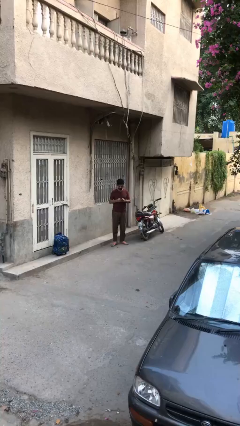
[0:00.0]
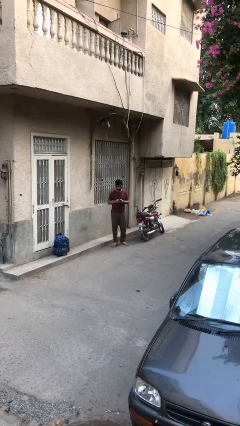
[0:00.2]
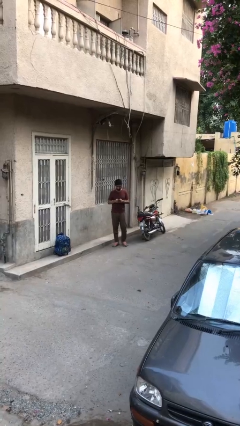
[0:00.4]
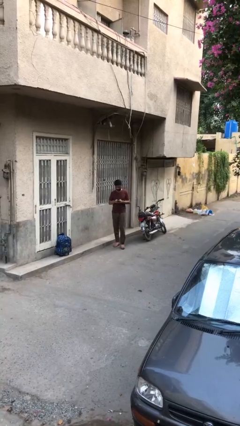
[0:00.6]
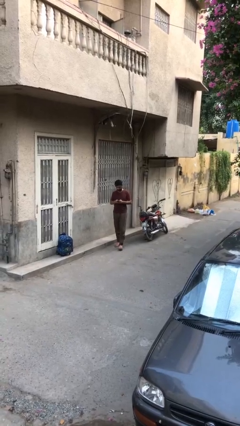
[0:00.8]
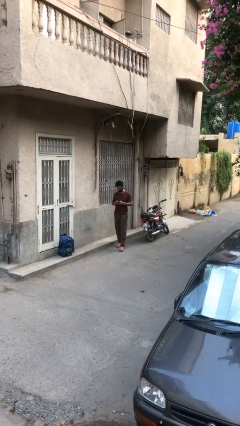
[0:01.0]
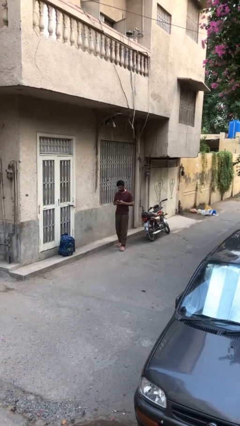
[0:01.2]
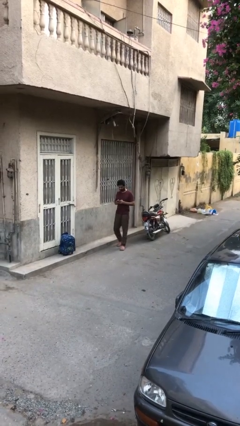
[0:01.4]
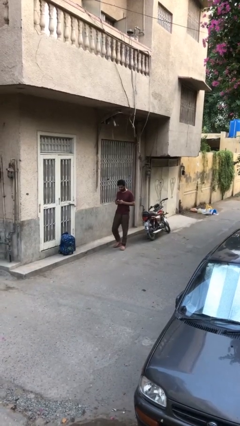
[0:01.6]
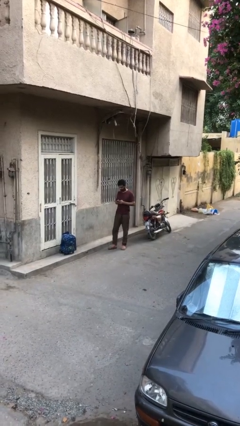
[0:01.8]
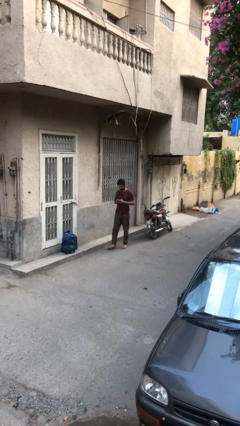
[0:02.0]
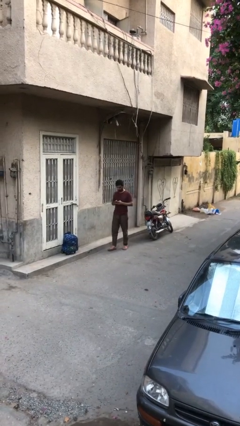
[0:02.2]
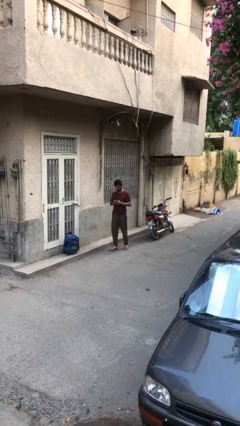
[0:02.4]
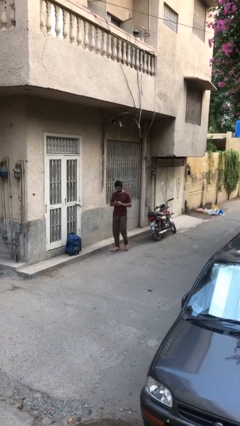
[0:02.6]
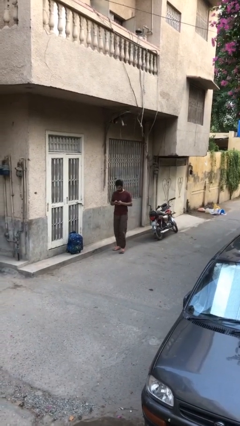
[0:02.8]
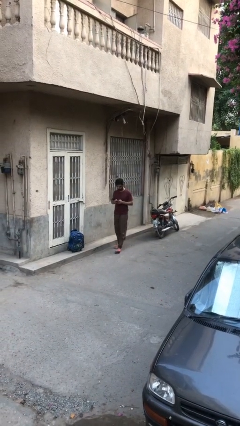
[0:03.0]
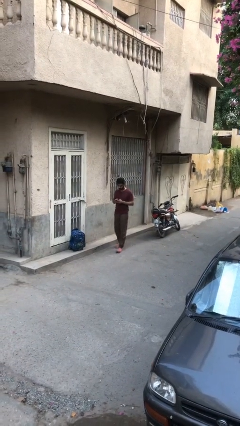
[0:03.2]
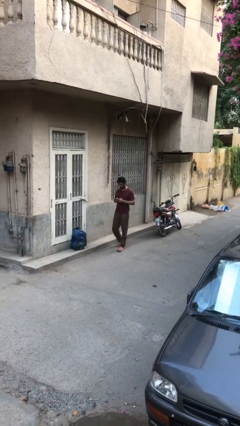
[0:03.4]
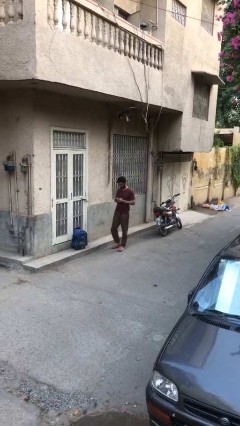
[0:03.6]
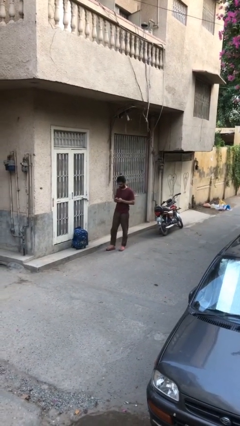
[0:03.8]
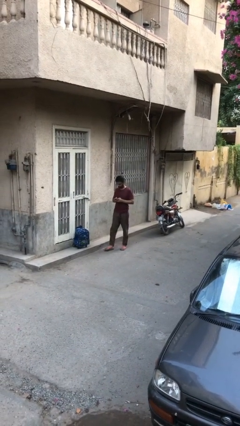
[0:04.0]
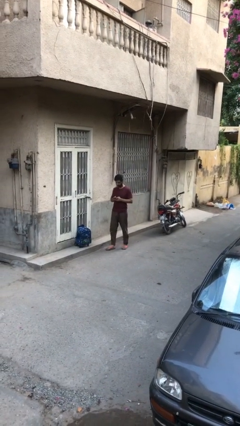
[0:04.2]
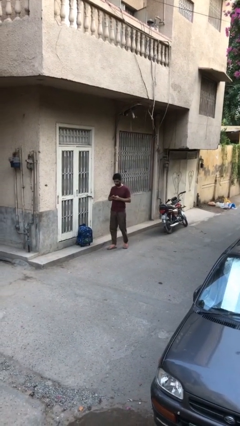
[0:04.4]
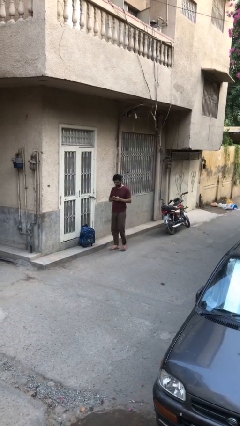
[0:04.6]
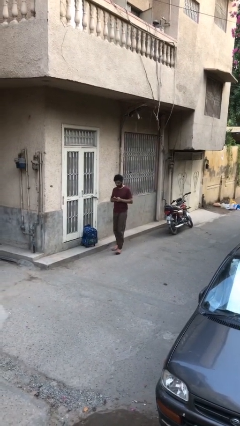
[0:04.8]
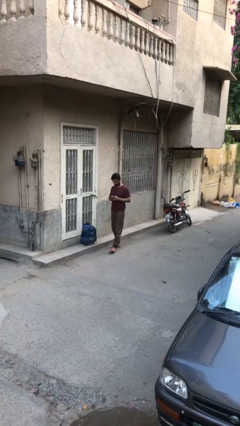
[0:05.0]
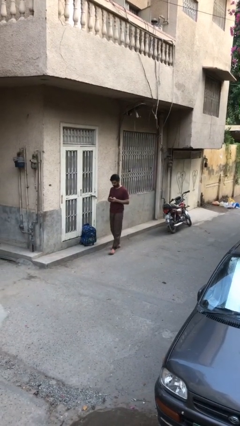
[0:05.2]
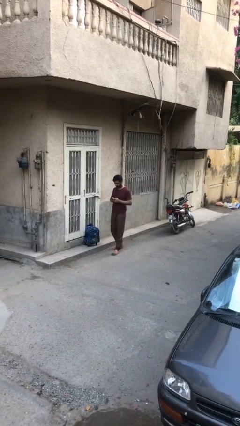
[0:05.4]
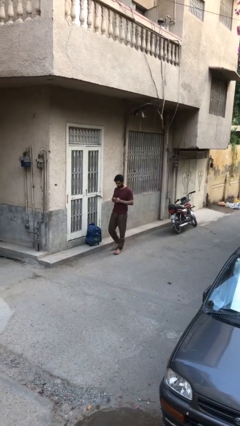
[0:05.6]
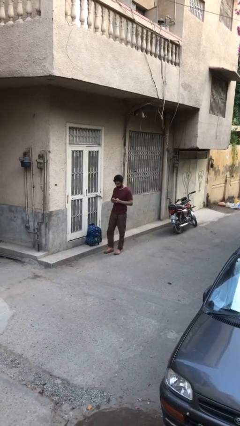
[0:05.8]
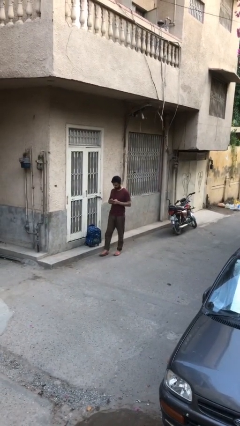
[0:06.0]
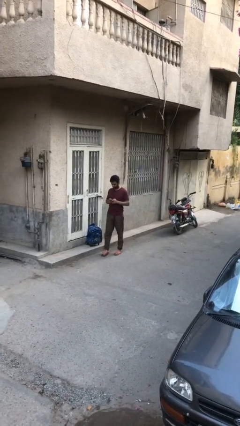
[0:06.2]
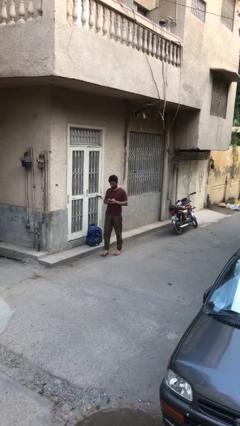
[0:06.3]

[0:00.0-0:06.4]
person texts on phone

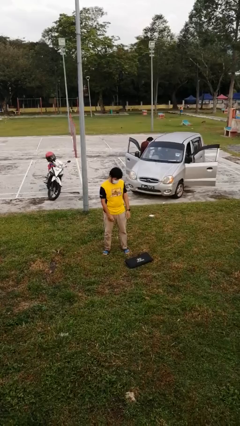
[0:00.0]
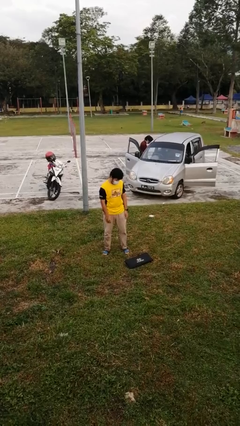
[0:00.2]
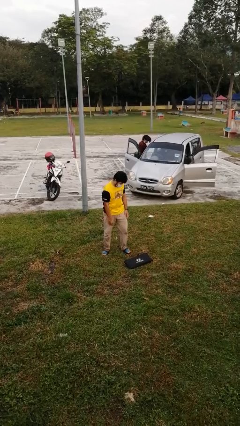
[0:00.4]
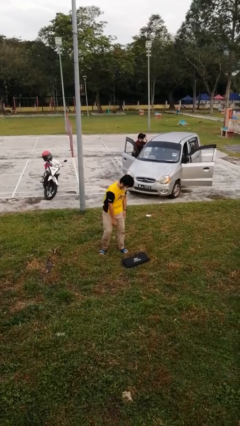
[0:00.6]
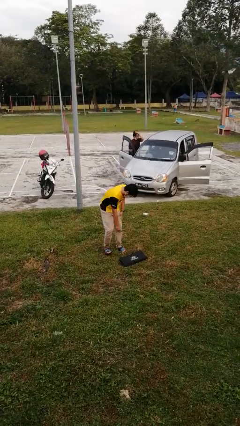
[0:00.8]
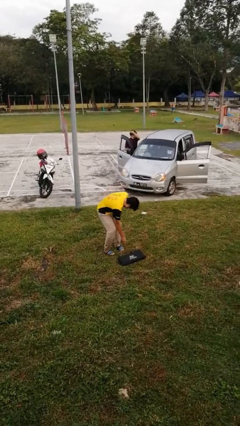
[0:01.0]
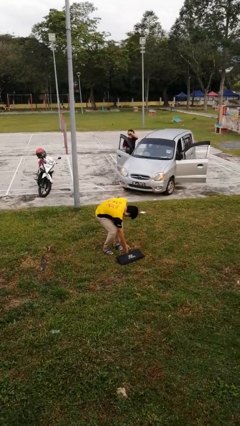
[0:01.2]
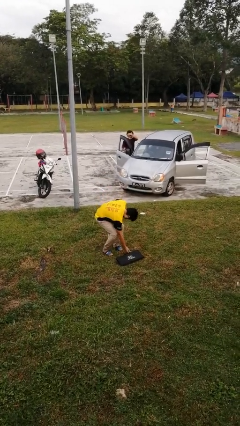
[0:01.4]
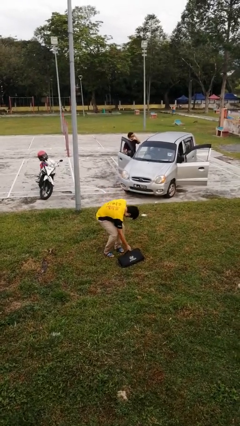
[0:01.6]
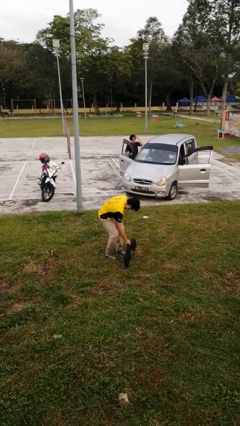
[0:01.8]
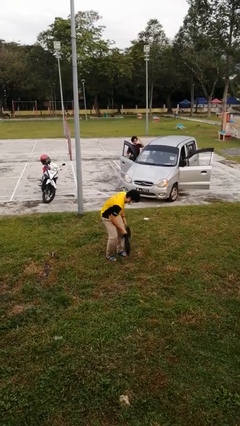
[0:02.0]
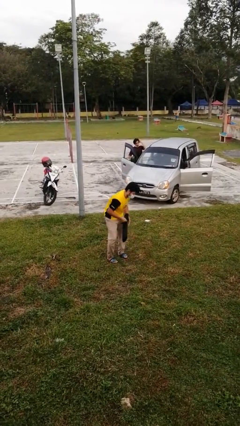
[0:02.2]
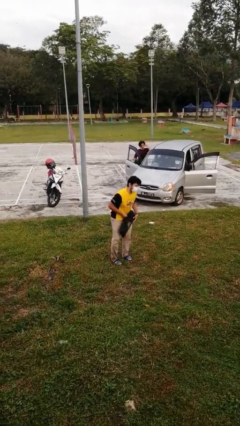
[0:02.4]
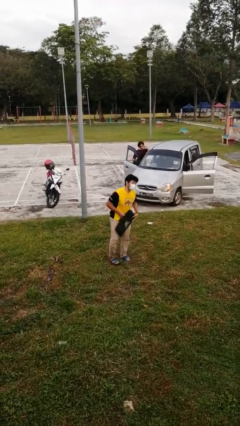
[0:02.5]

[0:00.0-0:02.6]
person picks up object from floor

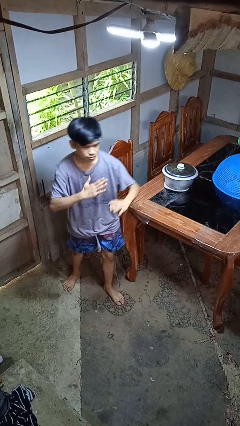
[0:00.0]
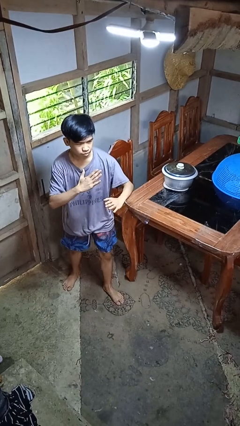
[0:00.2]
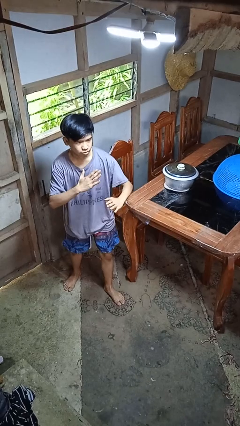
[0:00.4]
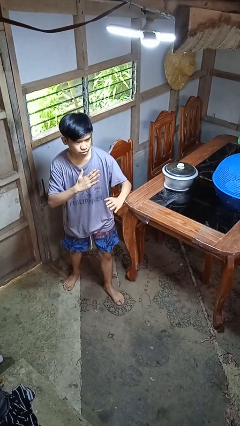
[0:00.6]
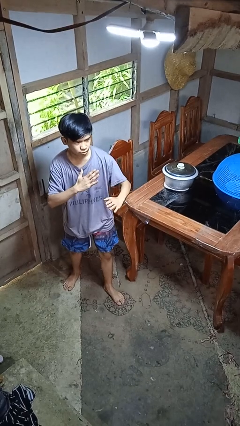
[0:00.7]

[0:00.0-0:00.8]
person karate chop

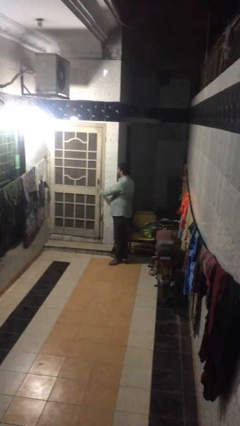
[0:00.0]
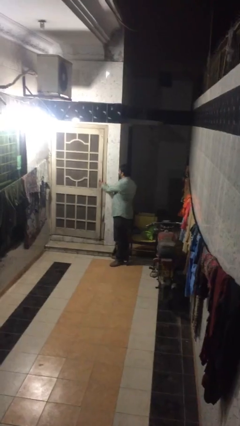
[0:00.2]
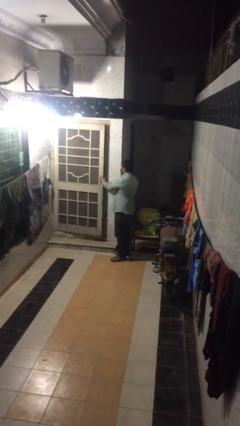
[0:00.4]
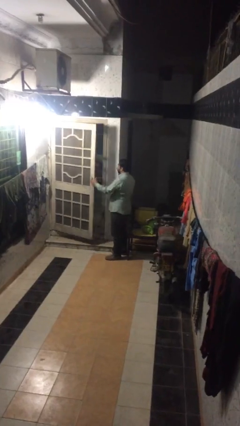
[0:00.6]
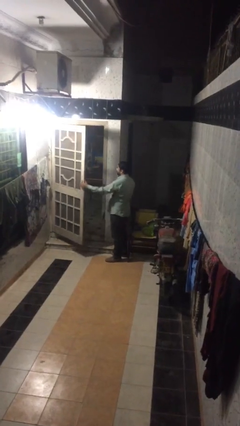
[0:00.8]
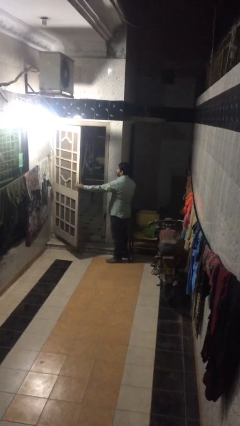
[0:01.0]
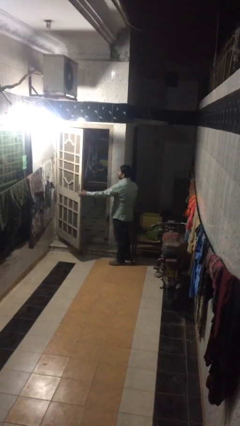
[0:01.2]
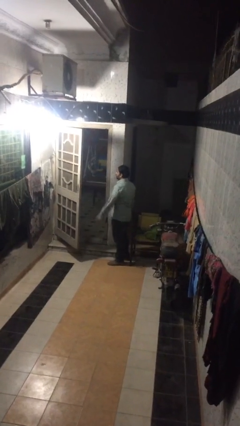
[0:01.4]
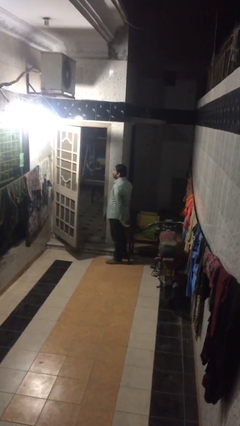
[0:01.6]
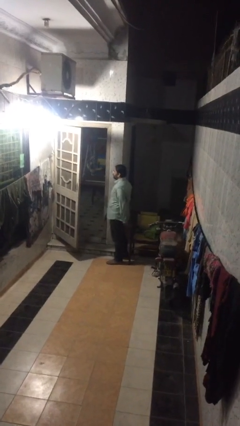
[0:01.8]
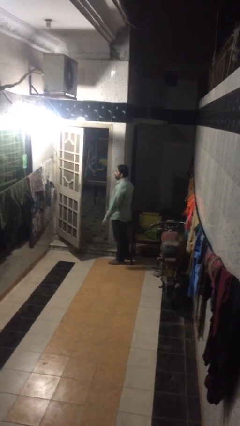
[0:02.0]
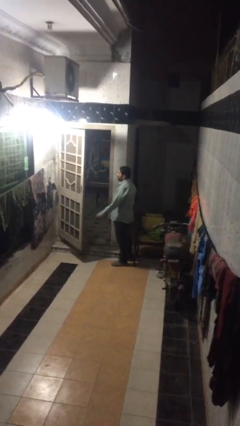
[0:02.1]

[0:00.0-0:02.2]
person opens facility door

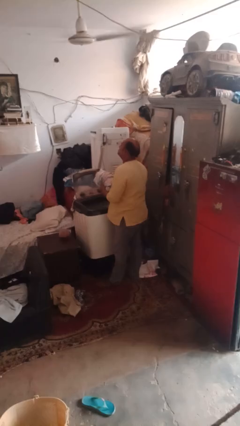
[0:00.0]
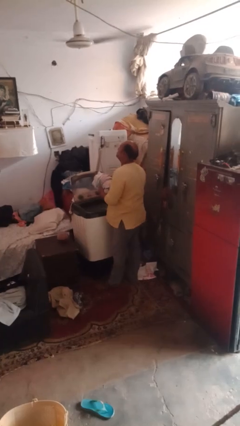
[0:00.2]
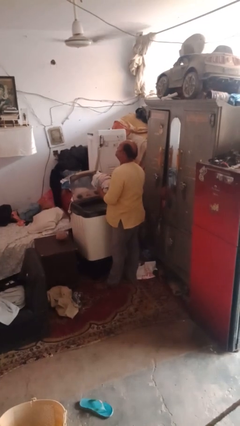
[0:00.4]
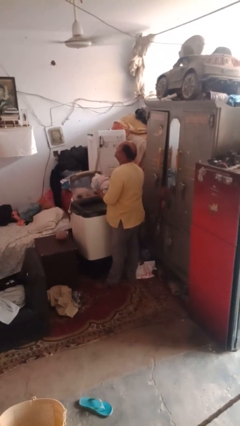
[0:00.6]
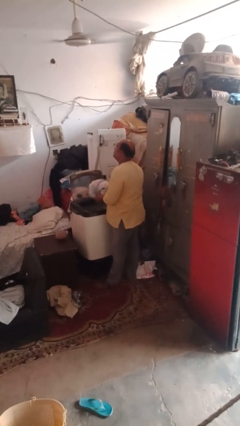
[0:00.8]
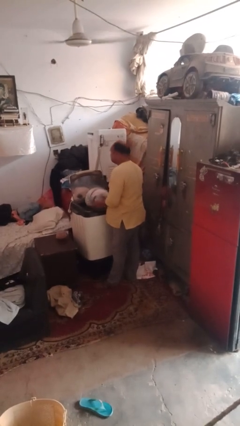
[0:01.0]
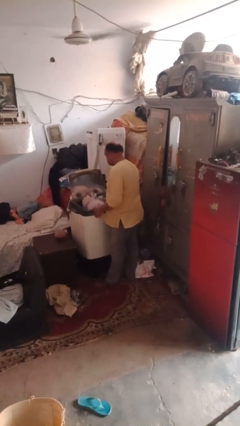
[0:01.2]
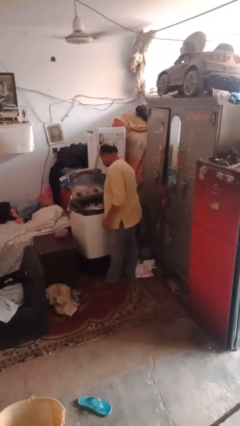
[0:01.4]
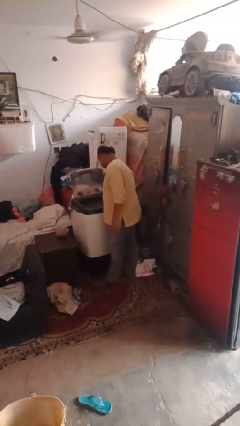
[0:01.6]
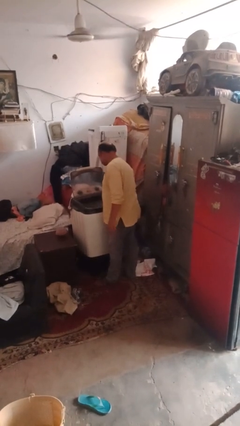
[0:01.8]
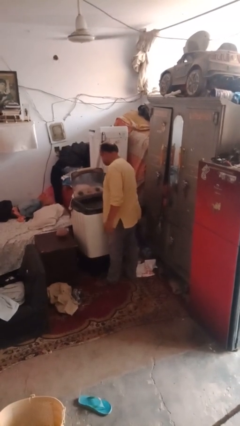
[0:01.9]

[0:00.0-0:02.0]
person loads clotheswasher

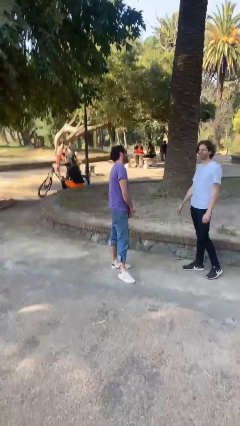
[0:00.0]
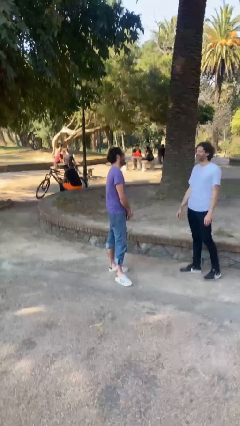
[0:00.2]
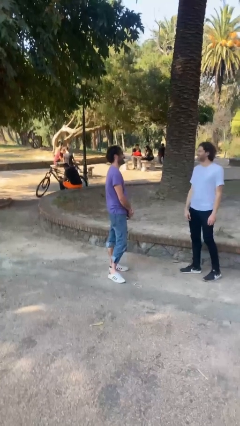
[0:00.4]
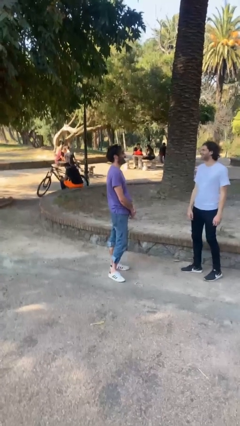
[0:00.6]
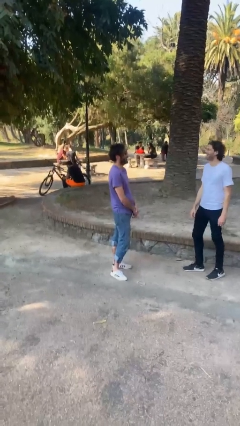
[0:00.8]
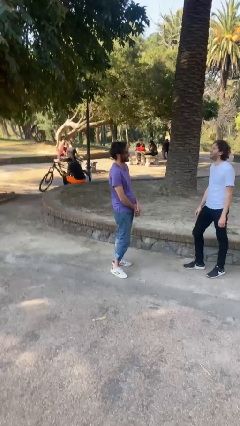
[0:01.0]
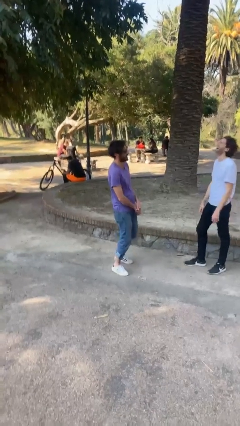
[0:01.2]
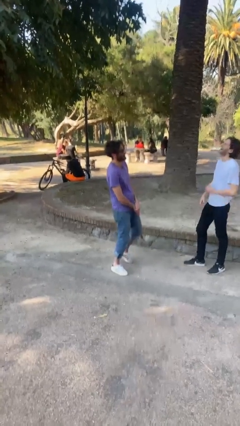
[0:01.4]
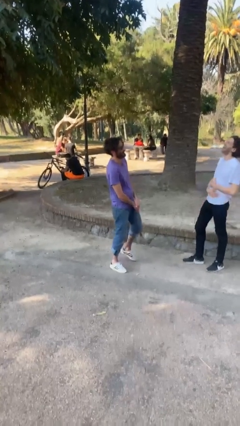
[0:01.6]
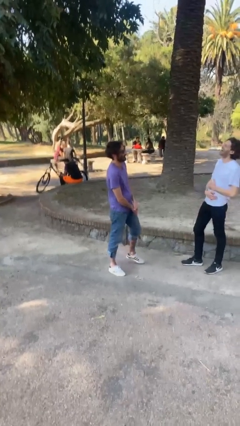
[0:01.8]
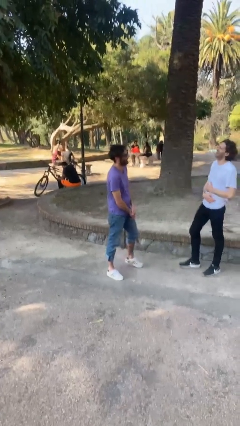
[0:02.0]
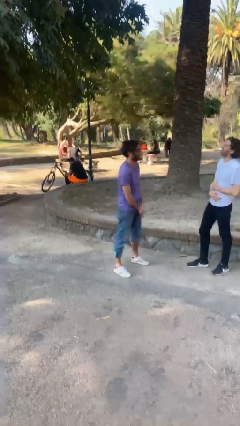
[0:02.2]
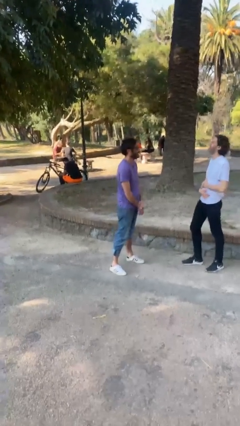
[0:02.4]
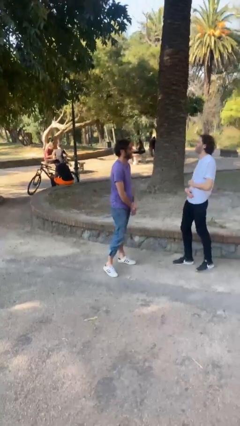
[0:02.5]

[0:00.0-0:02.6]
person laughs with person

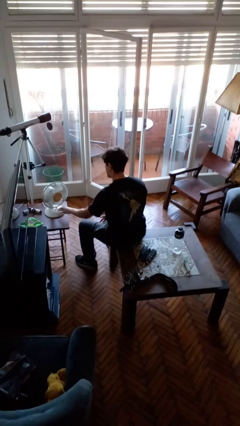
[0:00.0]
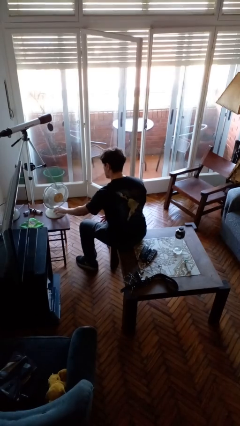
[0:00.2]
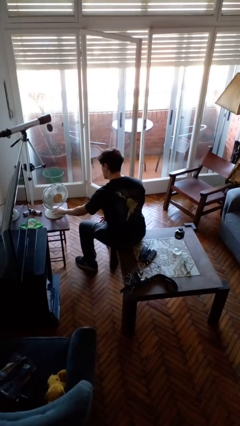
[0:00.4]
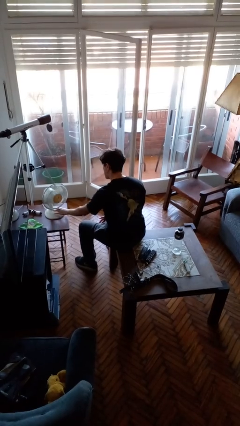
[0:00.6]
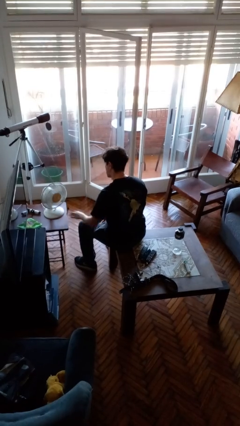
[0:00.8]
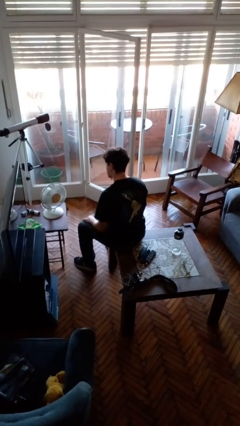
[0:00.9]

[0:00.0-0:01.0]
person turns on fan
